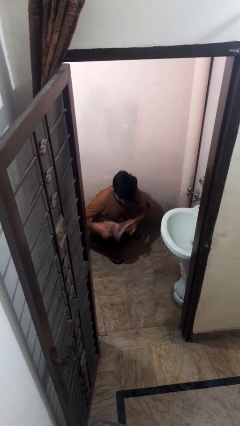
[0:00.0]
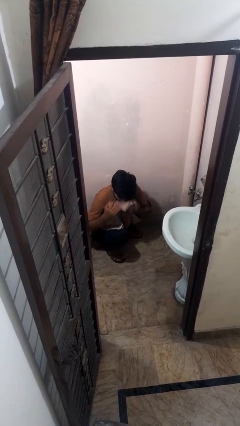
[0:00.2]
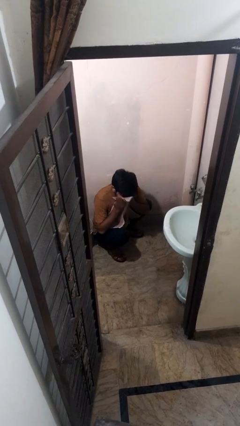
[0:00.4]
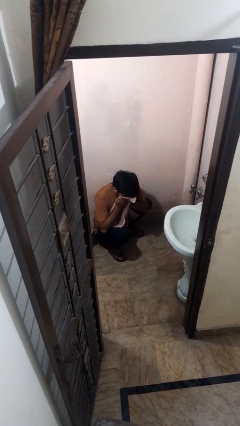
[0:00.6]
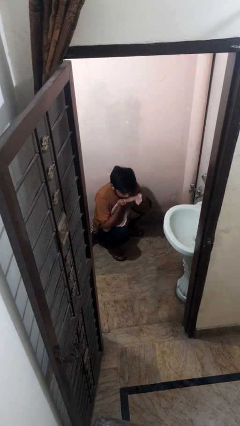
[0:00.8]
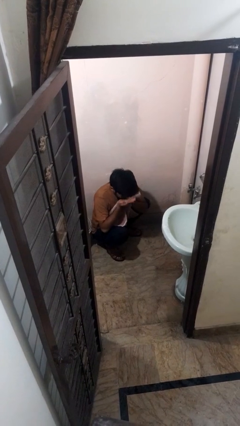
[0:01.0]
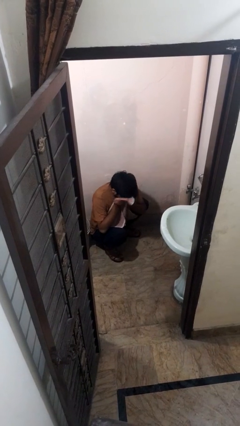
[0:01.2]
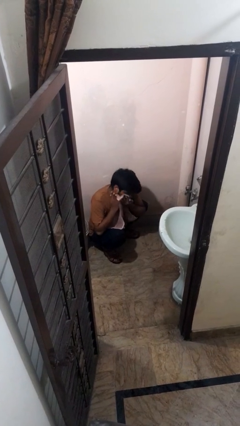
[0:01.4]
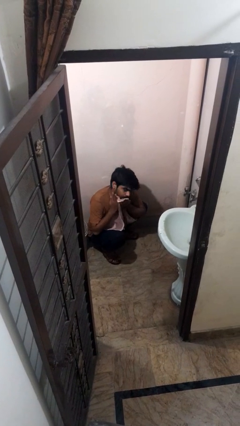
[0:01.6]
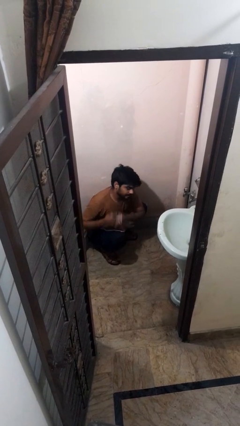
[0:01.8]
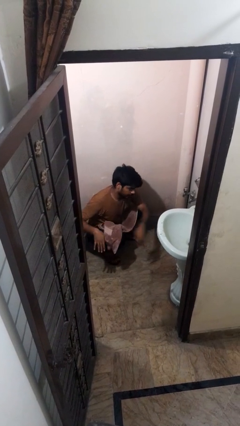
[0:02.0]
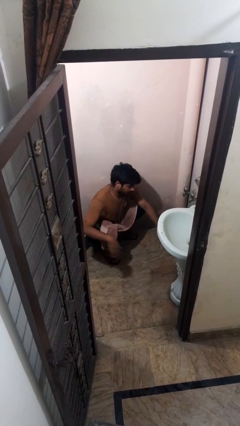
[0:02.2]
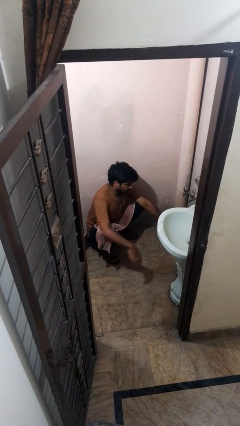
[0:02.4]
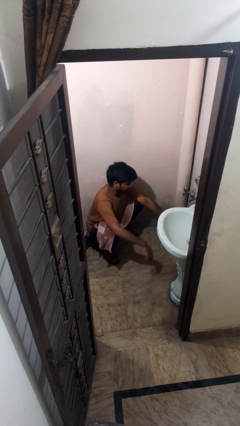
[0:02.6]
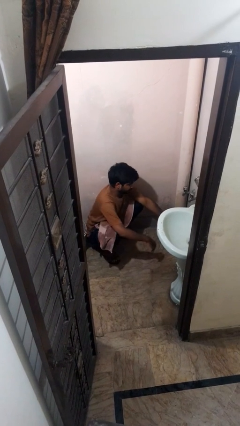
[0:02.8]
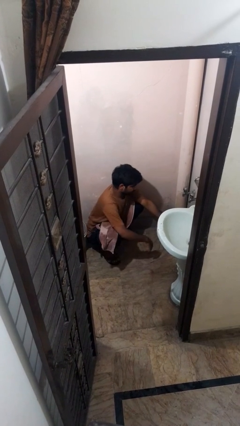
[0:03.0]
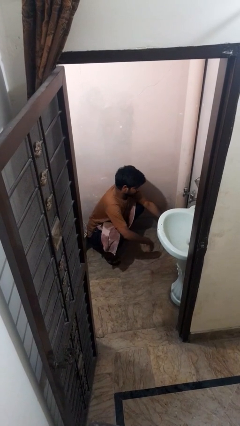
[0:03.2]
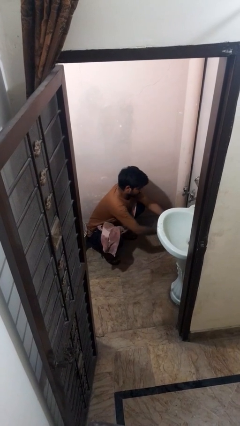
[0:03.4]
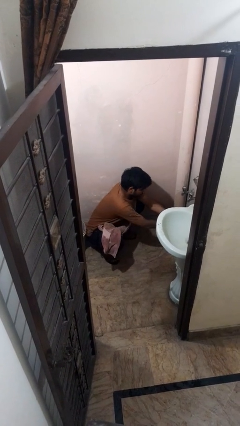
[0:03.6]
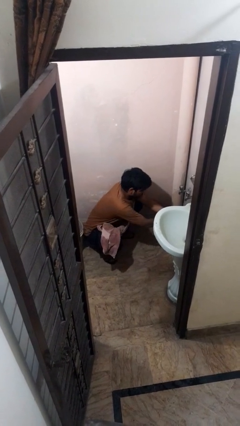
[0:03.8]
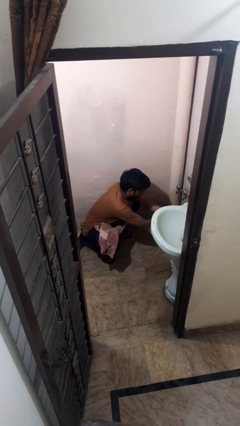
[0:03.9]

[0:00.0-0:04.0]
person picks up object from bed

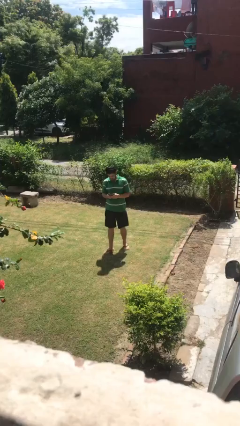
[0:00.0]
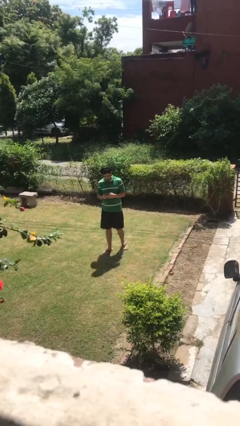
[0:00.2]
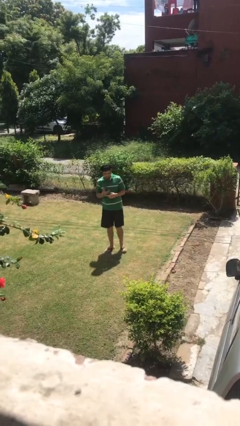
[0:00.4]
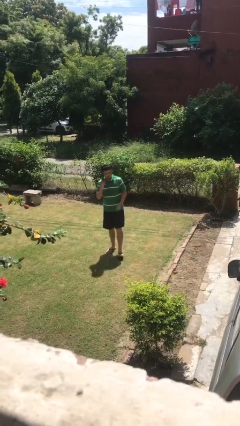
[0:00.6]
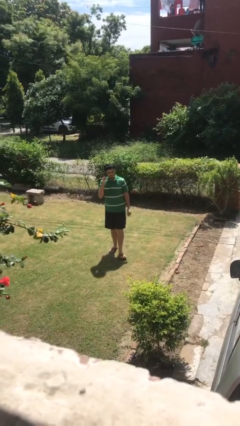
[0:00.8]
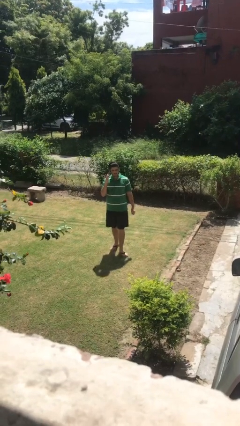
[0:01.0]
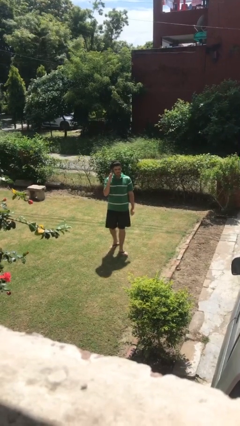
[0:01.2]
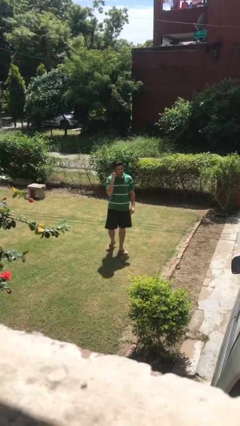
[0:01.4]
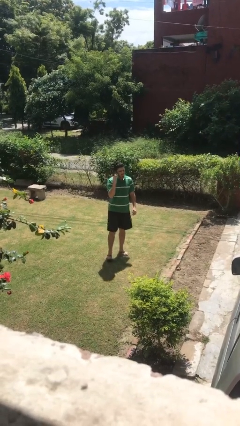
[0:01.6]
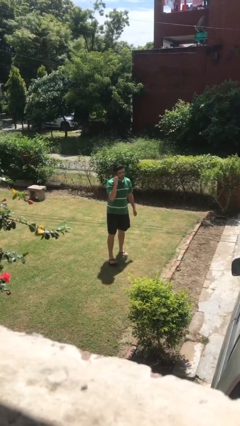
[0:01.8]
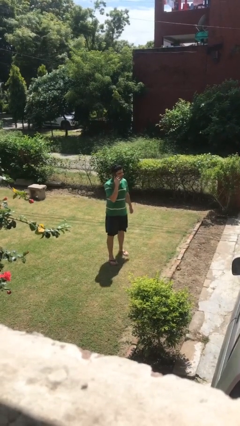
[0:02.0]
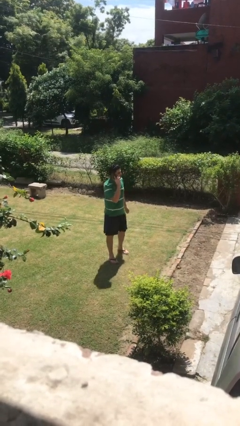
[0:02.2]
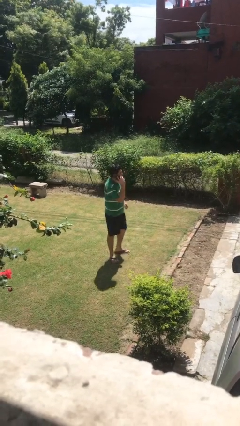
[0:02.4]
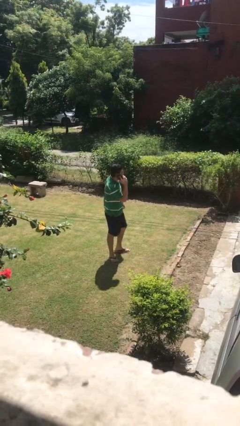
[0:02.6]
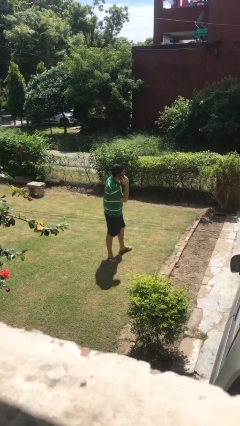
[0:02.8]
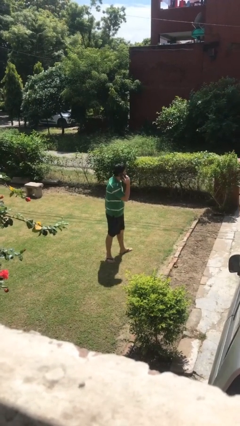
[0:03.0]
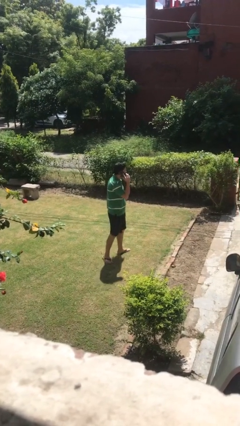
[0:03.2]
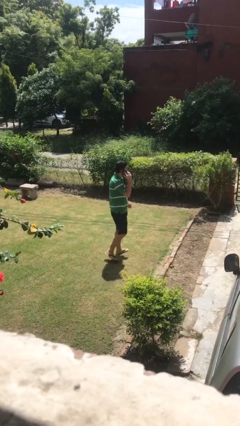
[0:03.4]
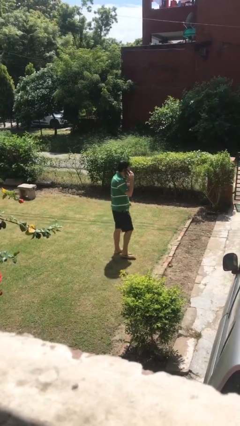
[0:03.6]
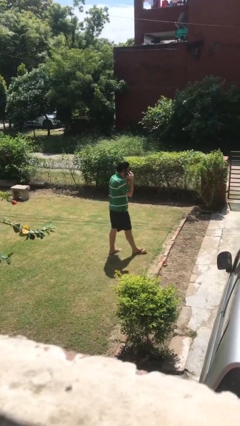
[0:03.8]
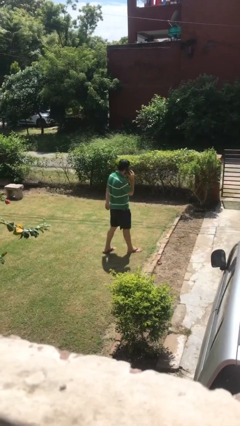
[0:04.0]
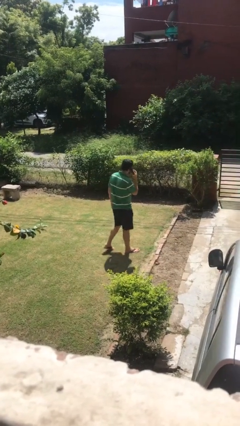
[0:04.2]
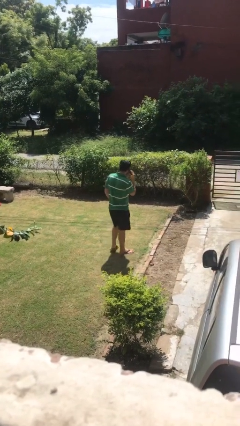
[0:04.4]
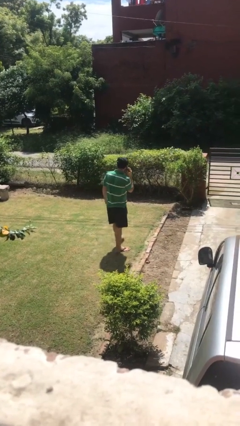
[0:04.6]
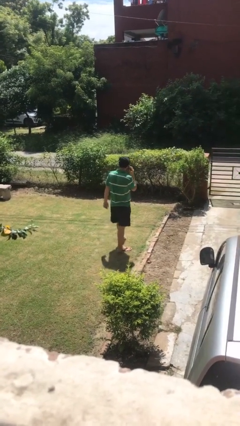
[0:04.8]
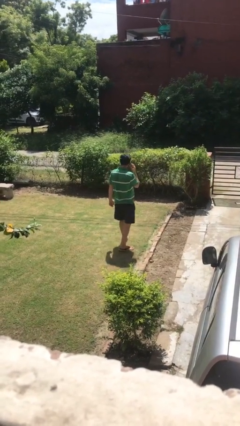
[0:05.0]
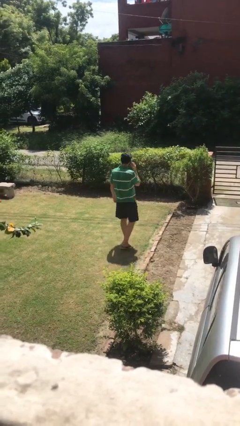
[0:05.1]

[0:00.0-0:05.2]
person talks on phone

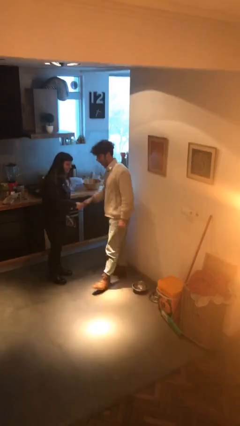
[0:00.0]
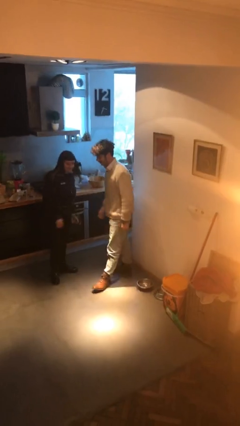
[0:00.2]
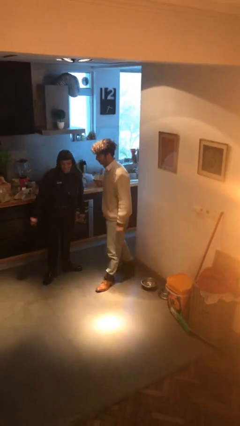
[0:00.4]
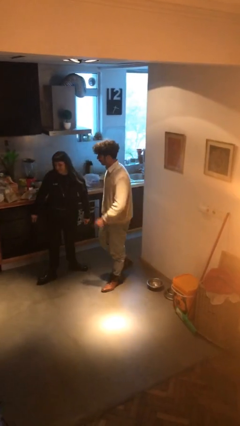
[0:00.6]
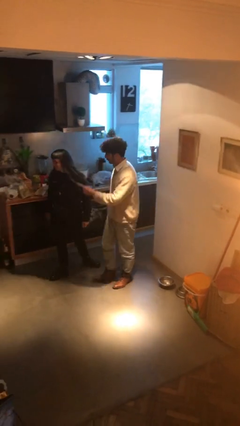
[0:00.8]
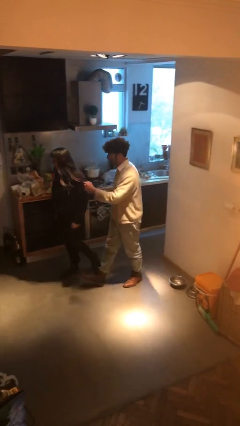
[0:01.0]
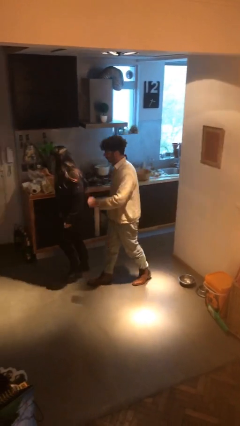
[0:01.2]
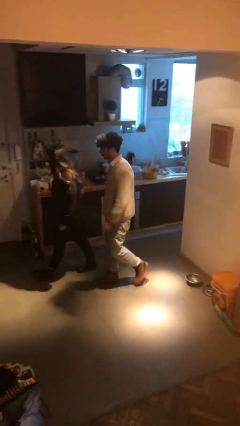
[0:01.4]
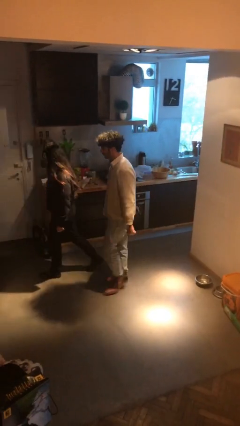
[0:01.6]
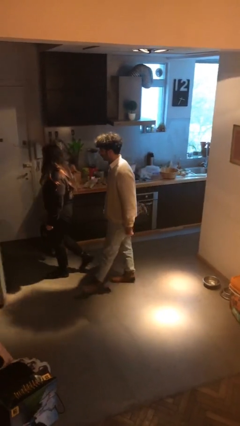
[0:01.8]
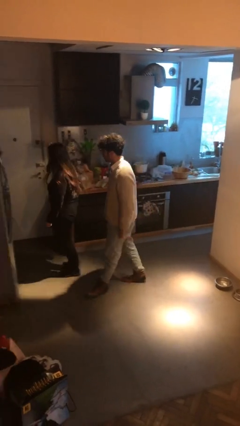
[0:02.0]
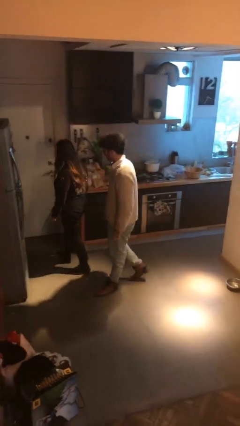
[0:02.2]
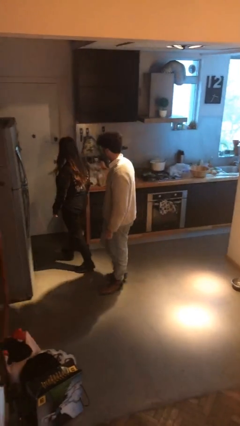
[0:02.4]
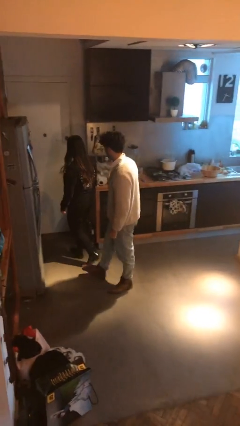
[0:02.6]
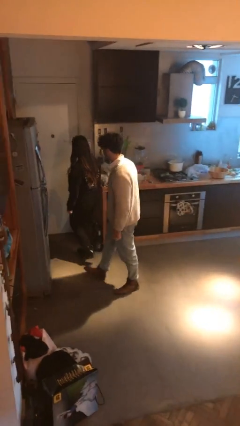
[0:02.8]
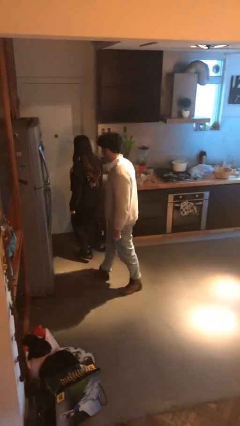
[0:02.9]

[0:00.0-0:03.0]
person talks to person

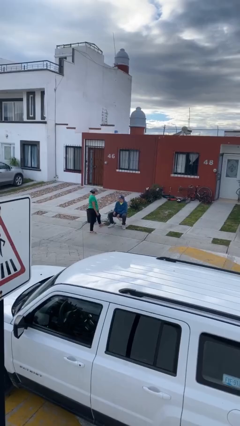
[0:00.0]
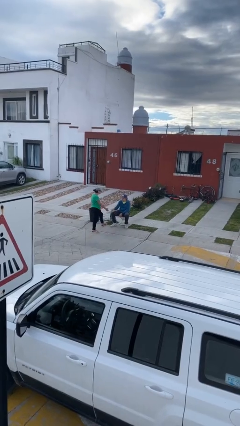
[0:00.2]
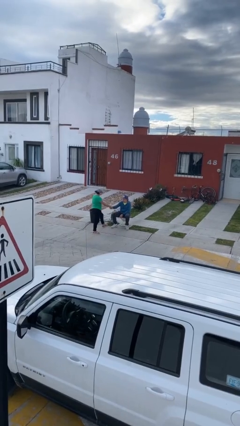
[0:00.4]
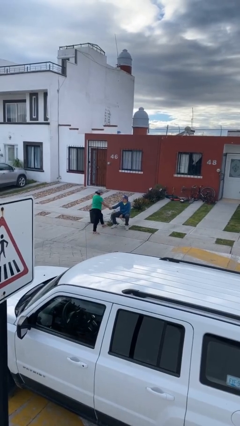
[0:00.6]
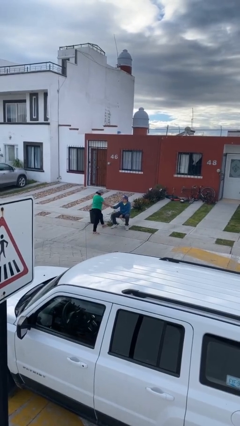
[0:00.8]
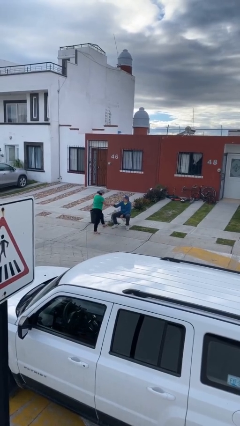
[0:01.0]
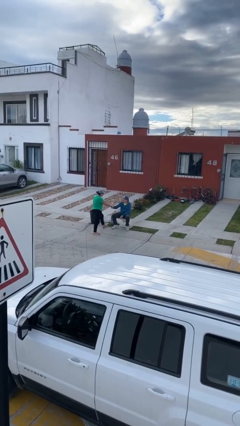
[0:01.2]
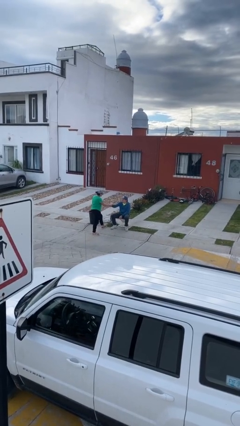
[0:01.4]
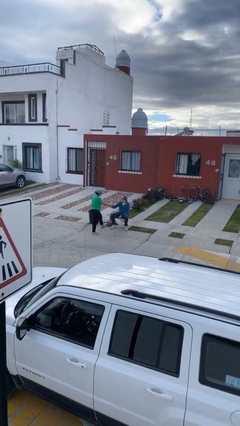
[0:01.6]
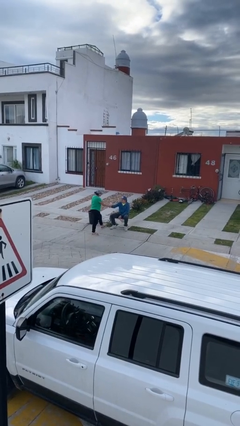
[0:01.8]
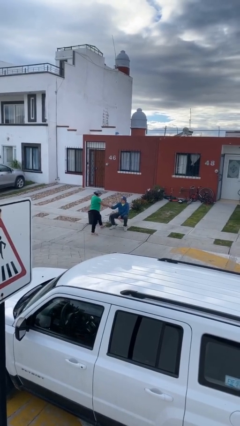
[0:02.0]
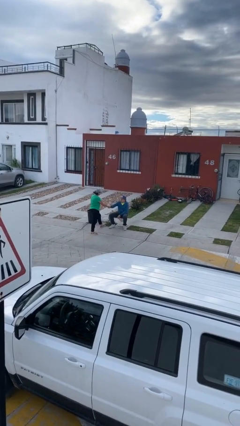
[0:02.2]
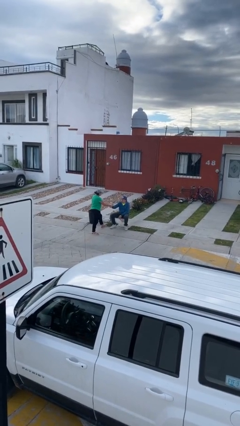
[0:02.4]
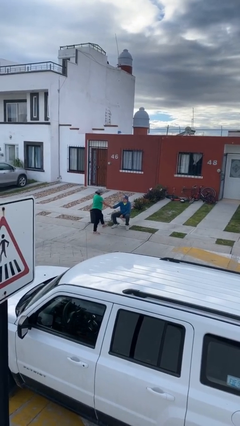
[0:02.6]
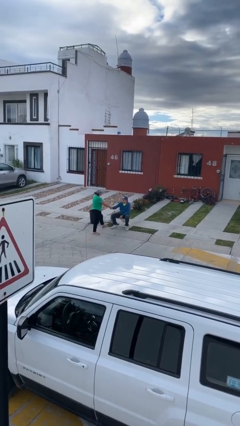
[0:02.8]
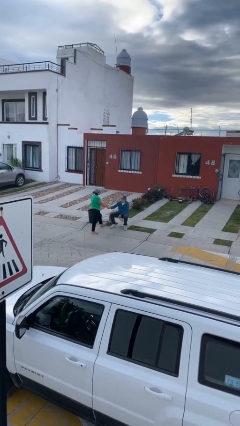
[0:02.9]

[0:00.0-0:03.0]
person shakes hand

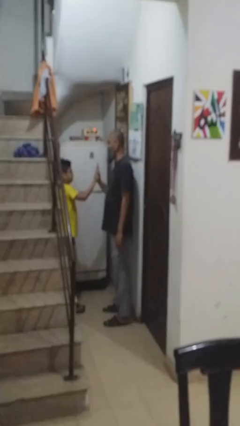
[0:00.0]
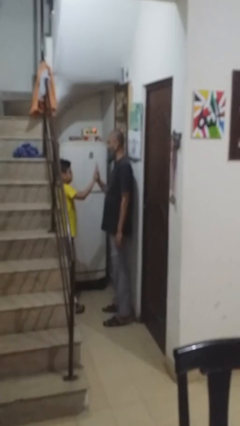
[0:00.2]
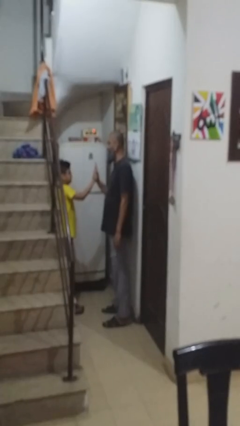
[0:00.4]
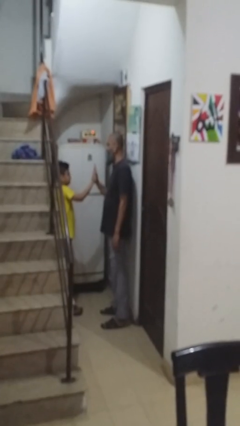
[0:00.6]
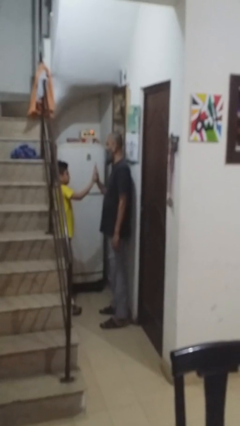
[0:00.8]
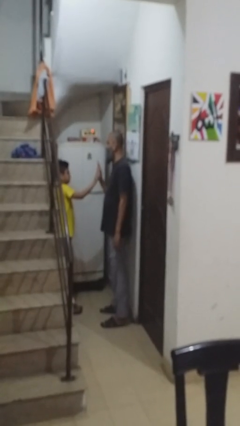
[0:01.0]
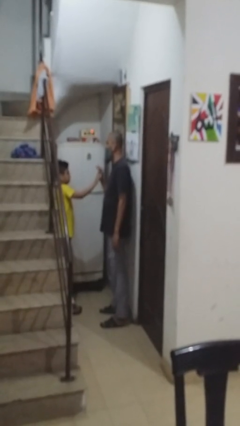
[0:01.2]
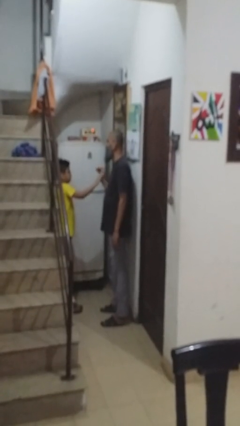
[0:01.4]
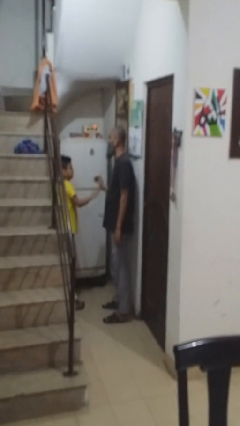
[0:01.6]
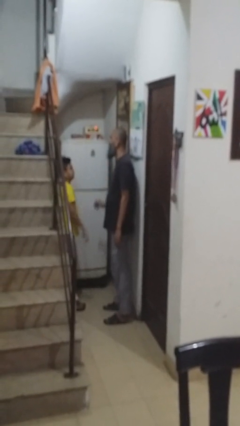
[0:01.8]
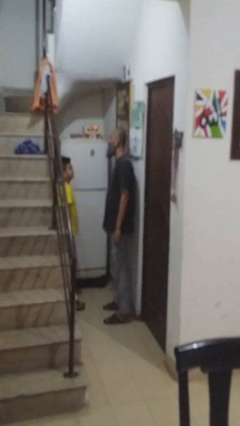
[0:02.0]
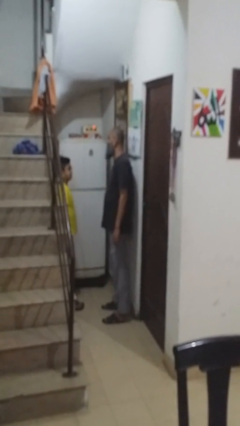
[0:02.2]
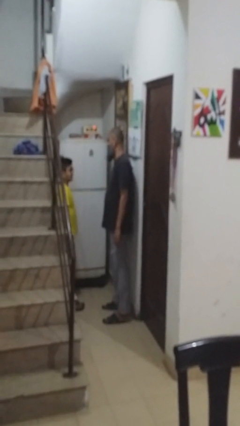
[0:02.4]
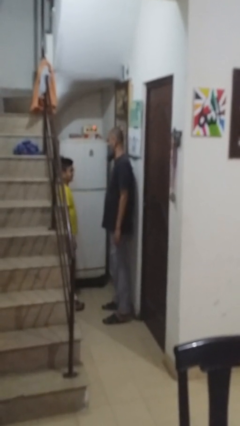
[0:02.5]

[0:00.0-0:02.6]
person highfives hand
